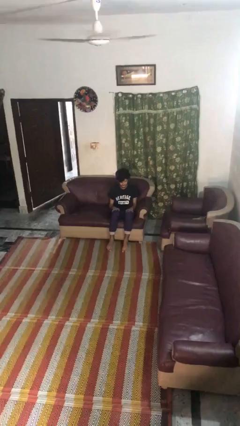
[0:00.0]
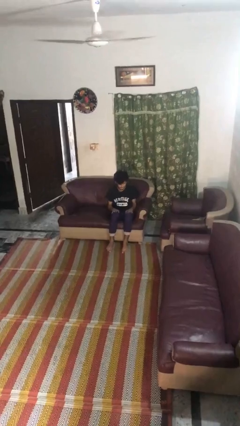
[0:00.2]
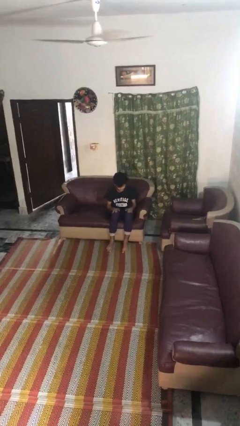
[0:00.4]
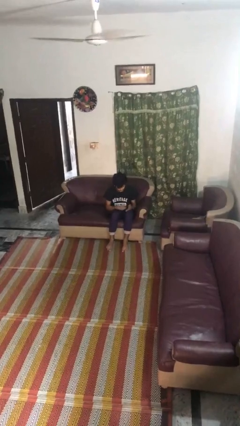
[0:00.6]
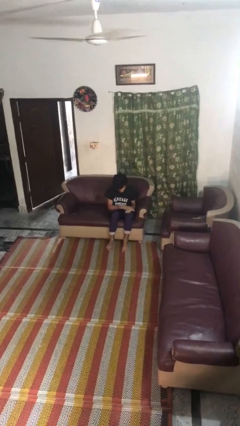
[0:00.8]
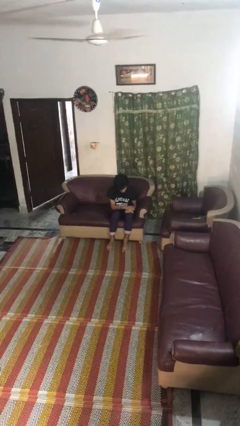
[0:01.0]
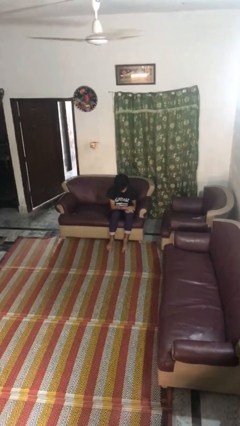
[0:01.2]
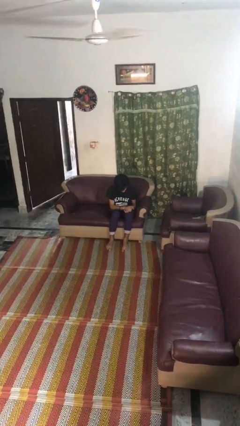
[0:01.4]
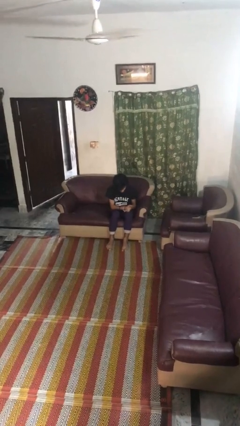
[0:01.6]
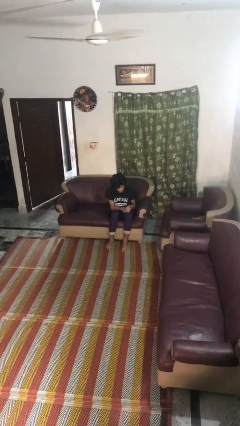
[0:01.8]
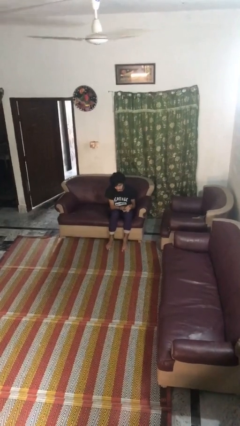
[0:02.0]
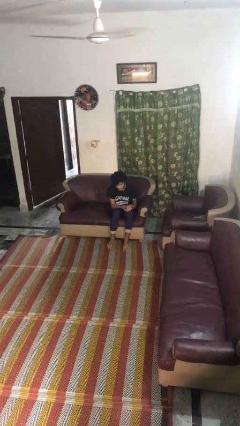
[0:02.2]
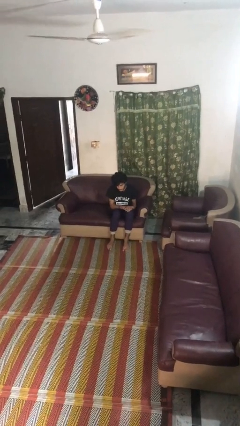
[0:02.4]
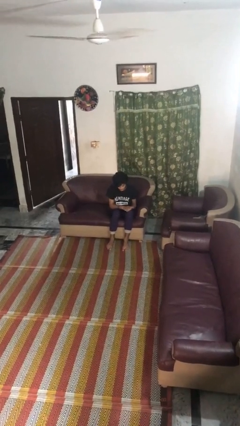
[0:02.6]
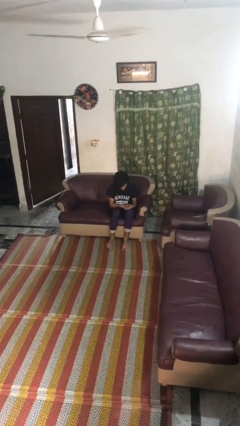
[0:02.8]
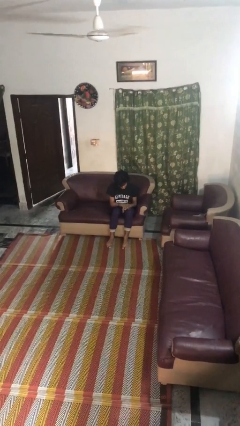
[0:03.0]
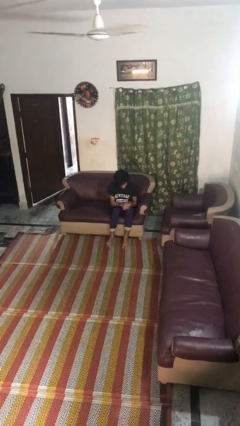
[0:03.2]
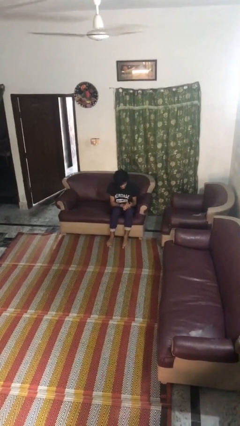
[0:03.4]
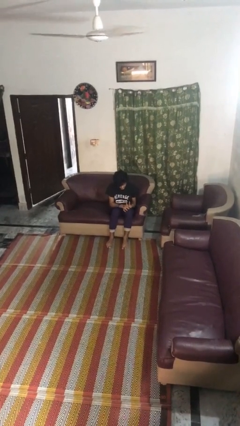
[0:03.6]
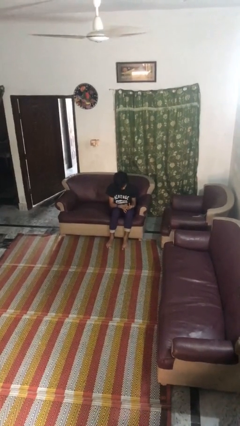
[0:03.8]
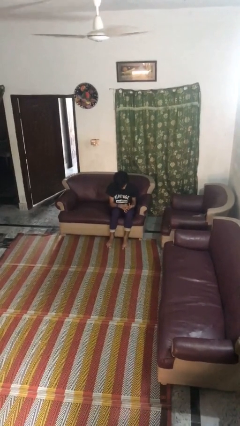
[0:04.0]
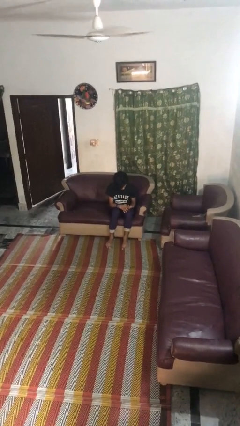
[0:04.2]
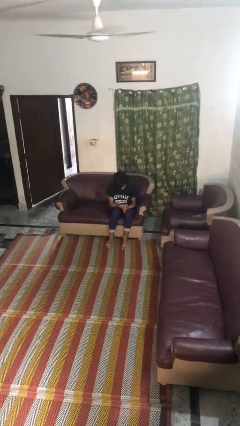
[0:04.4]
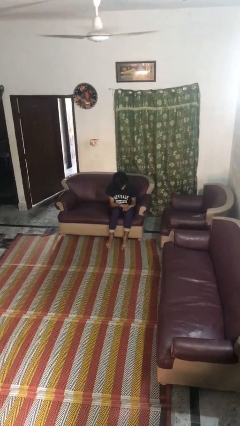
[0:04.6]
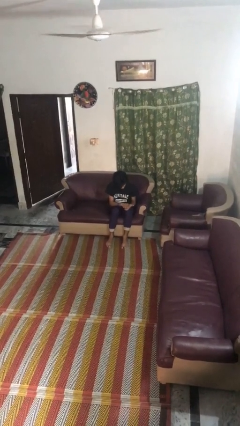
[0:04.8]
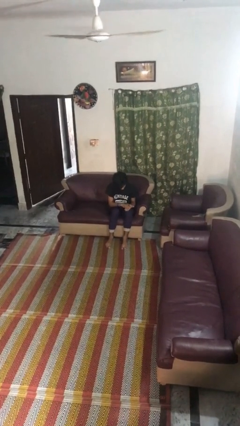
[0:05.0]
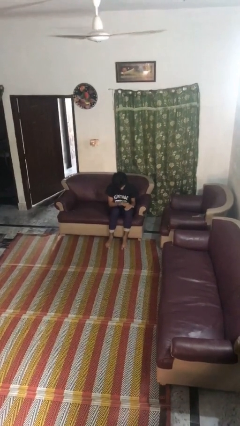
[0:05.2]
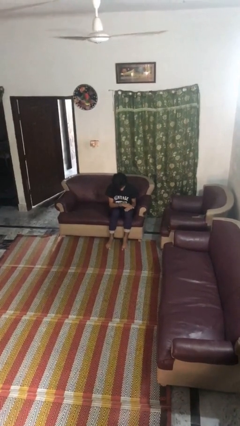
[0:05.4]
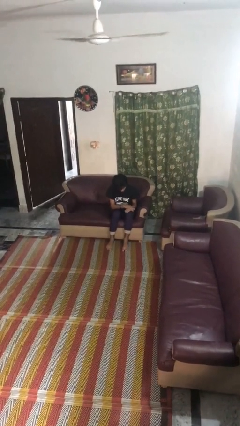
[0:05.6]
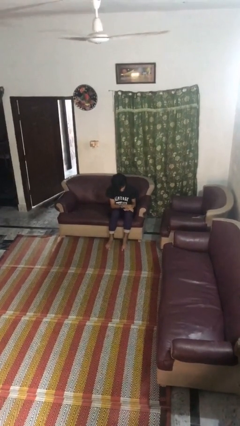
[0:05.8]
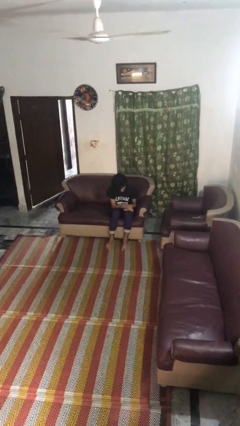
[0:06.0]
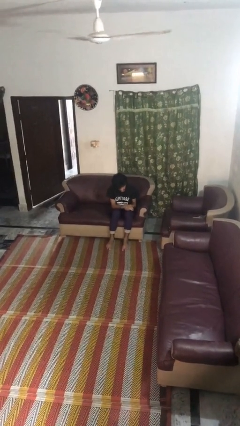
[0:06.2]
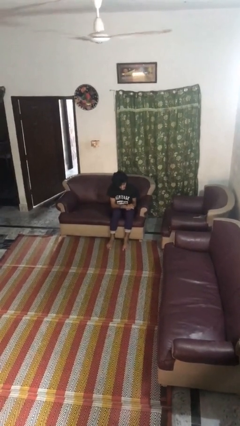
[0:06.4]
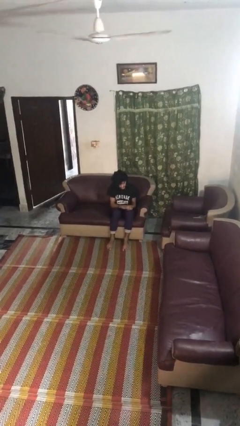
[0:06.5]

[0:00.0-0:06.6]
person looks at hands in lap

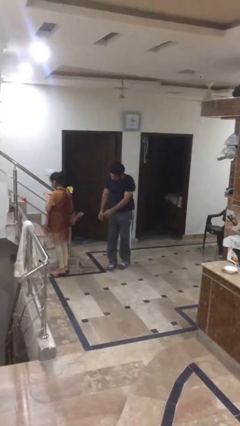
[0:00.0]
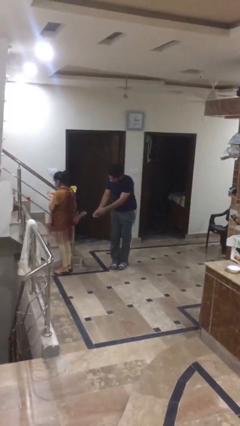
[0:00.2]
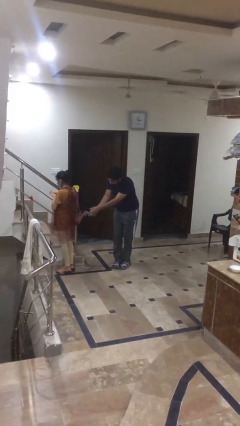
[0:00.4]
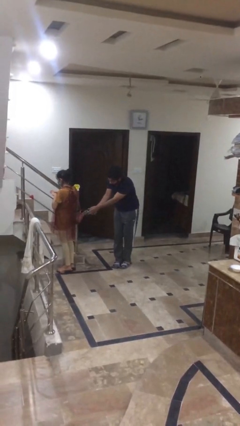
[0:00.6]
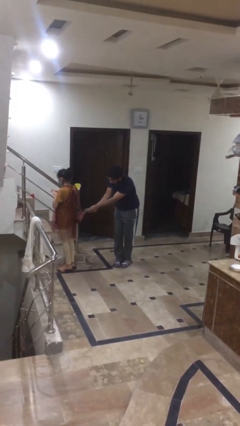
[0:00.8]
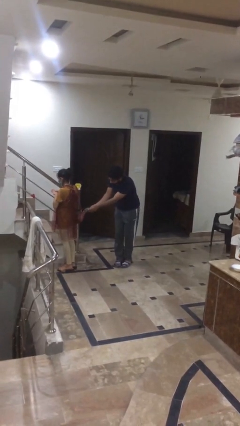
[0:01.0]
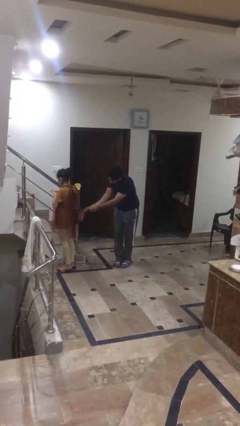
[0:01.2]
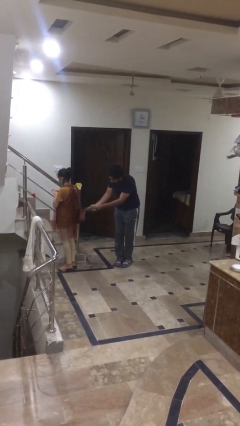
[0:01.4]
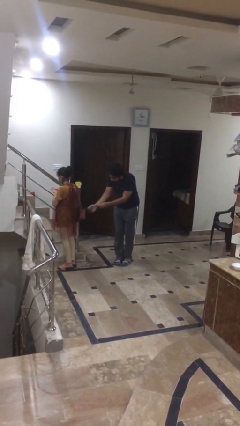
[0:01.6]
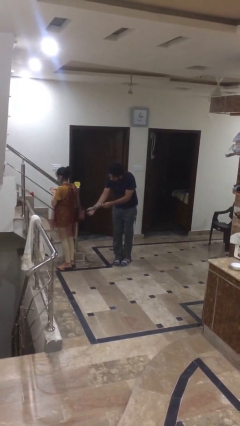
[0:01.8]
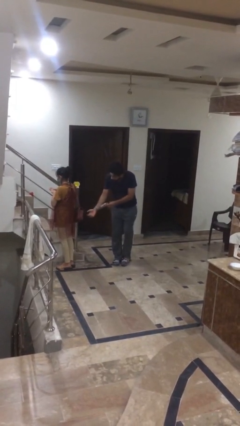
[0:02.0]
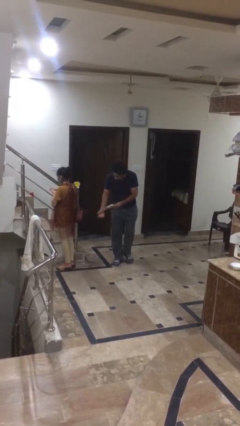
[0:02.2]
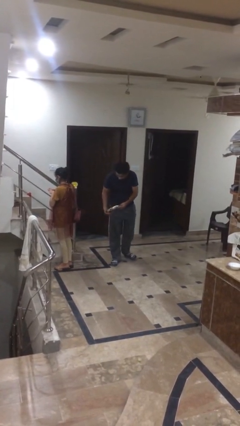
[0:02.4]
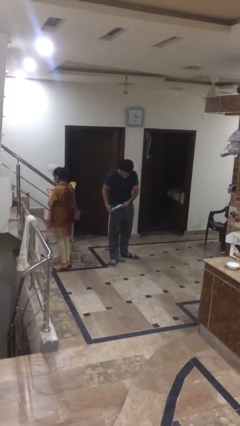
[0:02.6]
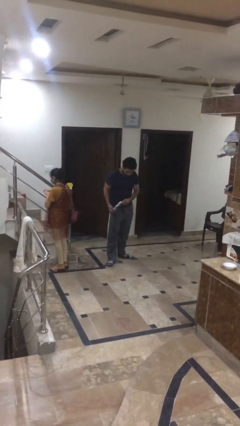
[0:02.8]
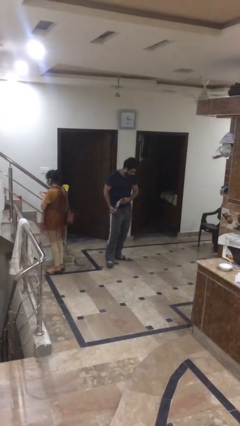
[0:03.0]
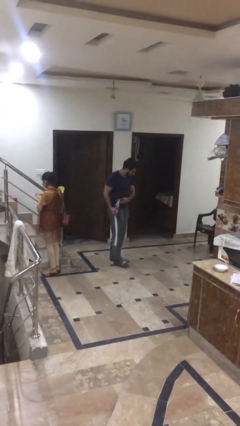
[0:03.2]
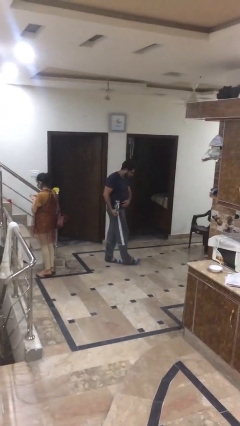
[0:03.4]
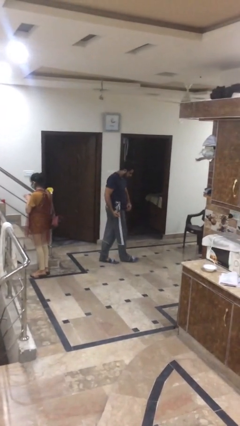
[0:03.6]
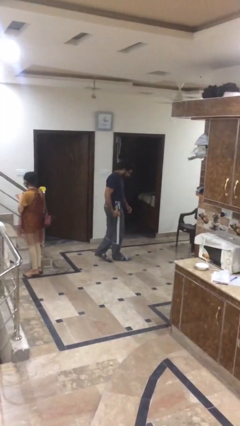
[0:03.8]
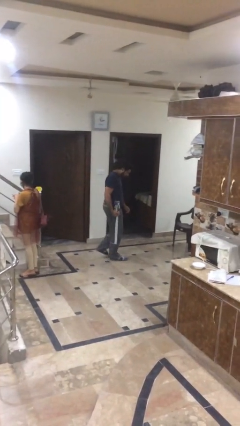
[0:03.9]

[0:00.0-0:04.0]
person steals object from person

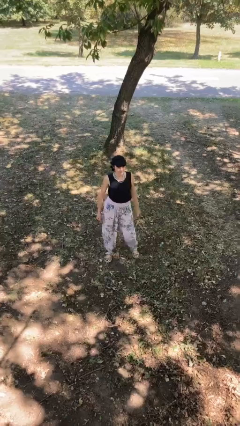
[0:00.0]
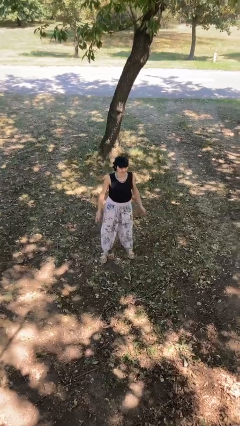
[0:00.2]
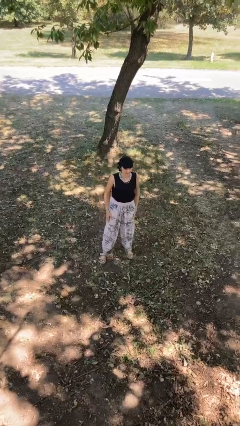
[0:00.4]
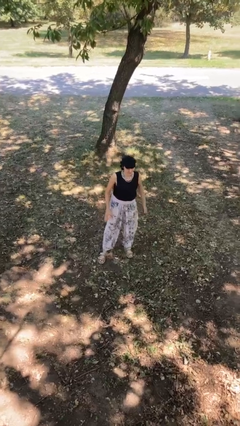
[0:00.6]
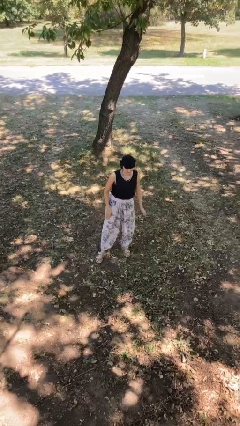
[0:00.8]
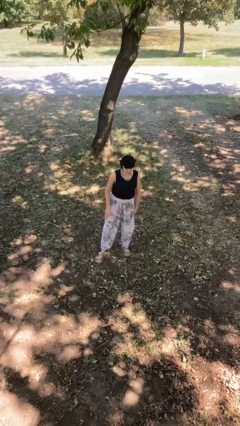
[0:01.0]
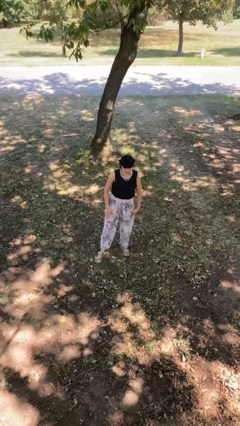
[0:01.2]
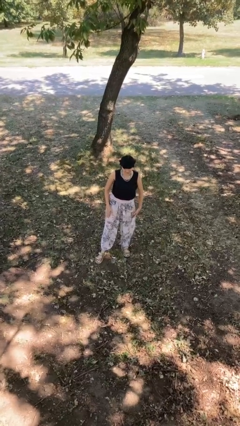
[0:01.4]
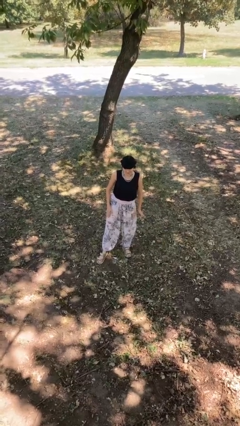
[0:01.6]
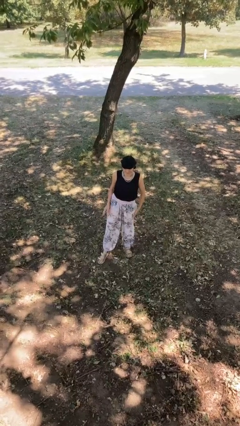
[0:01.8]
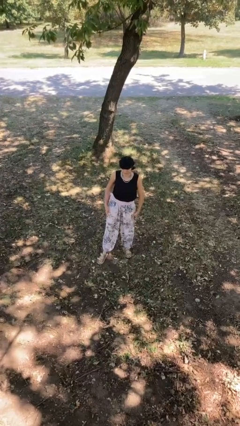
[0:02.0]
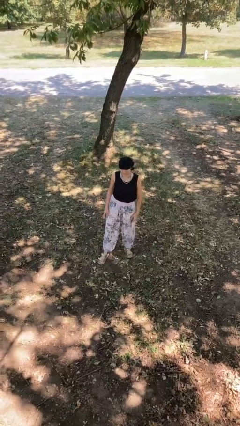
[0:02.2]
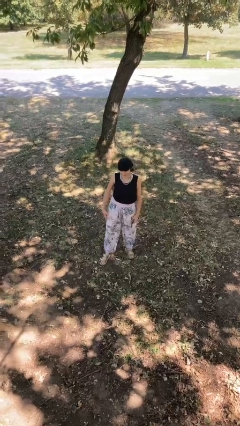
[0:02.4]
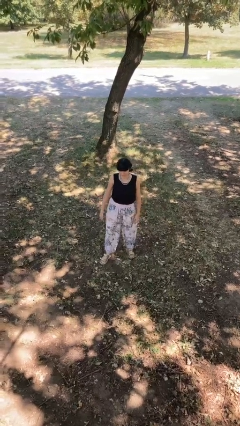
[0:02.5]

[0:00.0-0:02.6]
person slaps hands on thighs

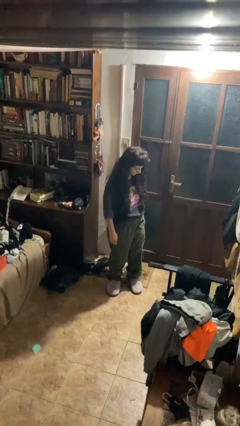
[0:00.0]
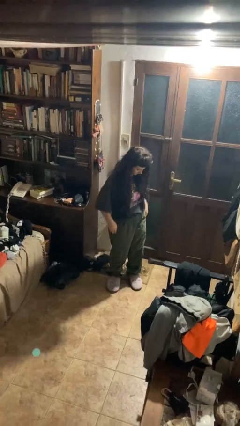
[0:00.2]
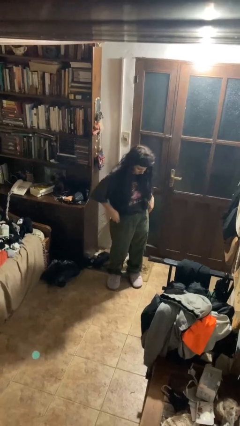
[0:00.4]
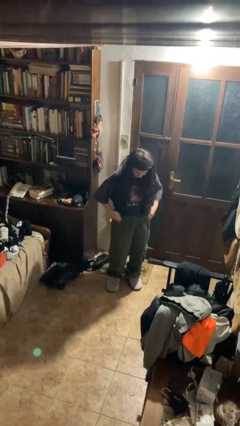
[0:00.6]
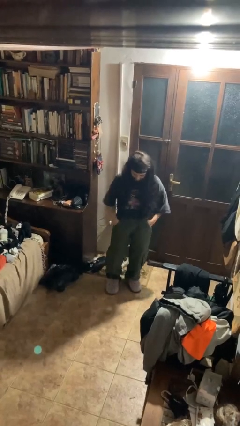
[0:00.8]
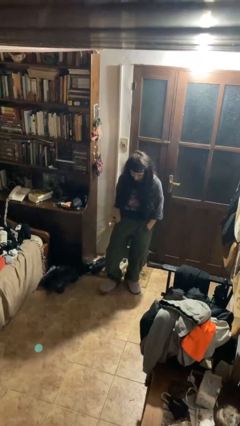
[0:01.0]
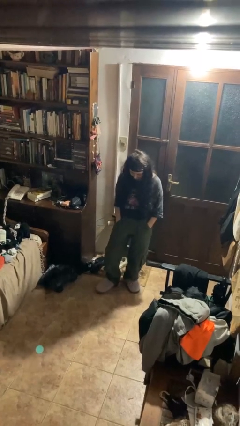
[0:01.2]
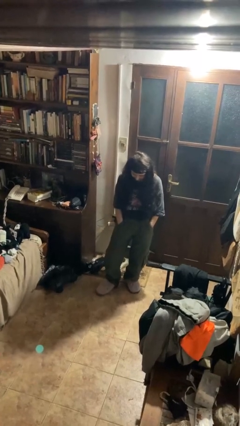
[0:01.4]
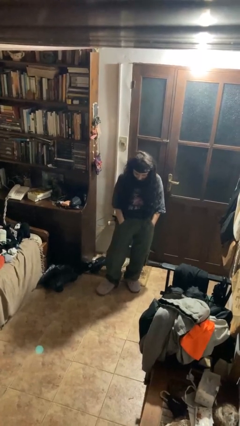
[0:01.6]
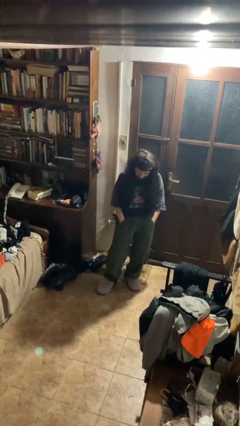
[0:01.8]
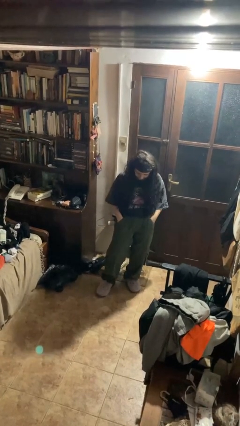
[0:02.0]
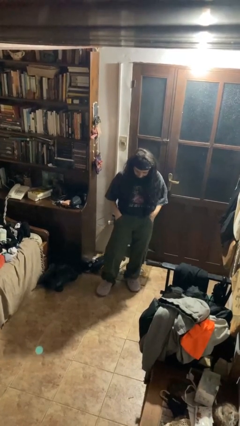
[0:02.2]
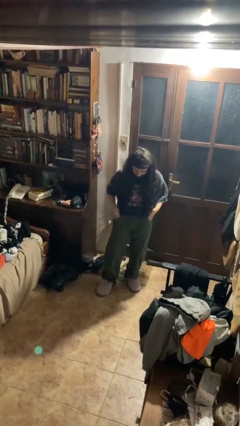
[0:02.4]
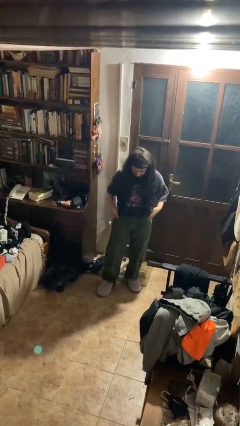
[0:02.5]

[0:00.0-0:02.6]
person puts hands in back pockets

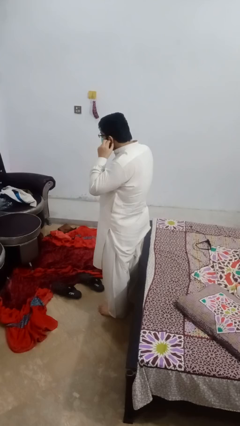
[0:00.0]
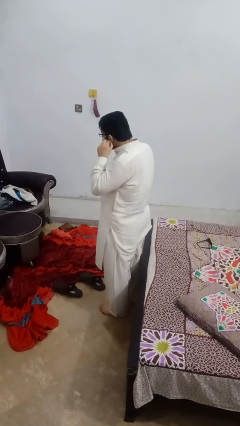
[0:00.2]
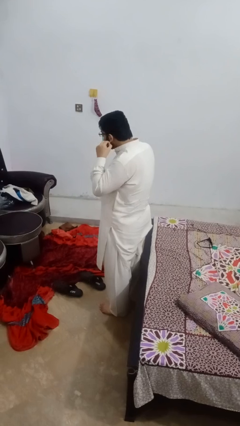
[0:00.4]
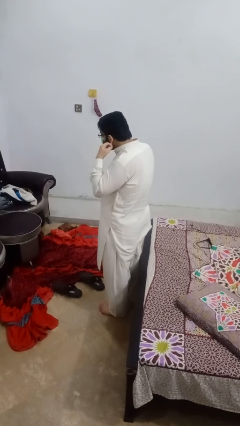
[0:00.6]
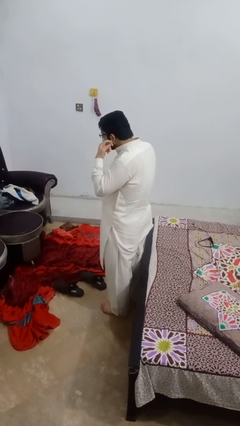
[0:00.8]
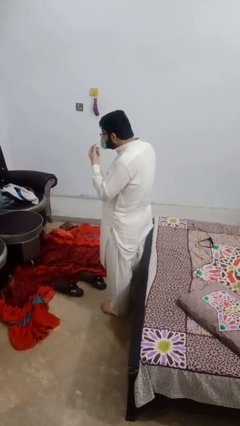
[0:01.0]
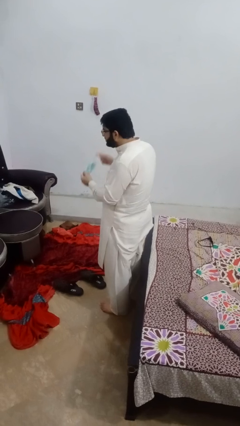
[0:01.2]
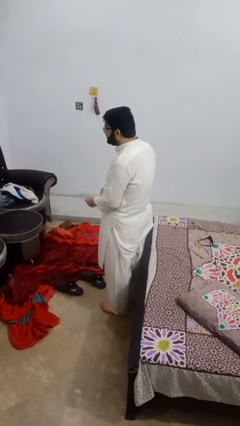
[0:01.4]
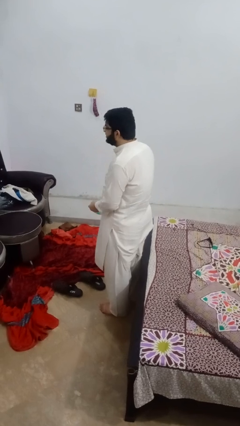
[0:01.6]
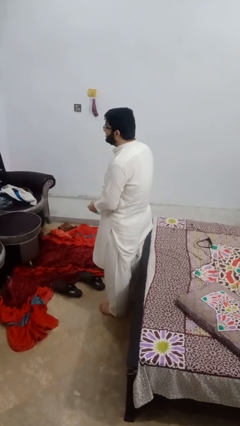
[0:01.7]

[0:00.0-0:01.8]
person takes off facemask

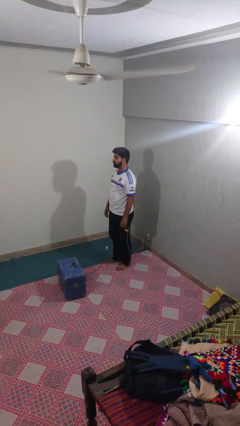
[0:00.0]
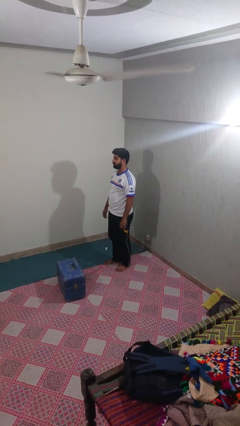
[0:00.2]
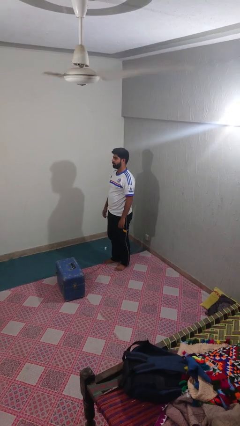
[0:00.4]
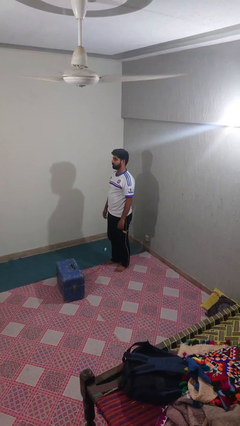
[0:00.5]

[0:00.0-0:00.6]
person lies down on floor
